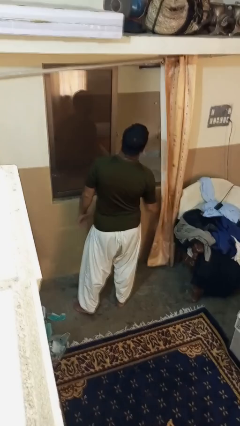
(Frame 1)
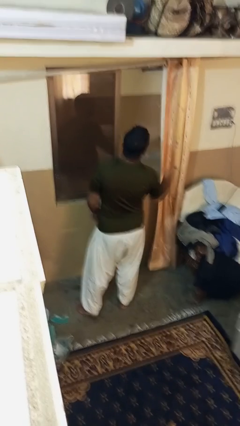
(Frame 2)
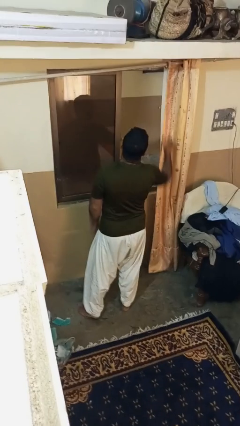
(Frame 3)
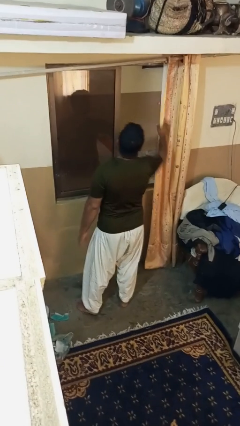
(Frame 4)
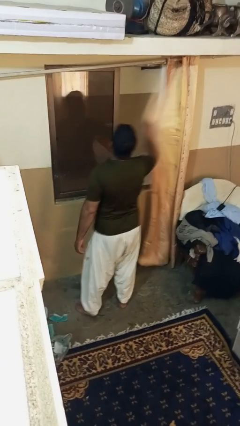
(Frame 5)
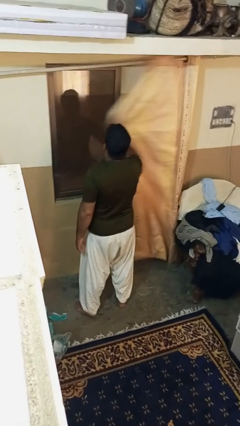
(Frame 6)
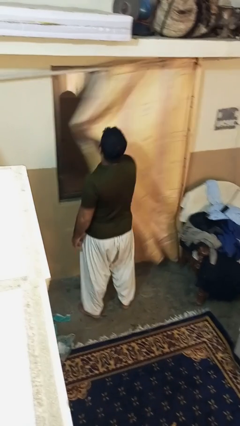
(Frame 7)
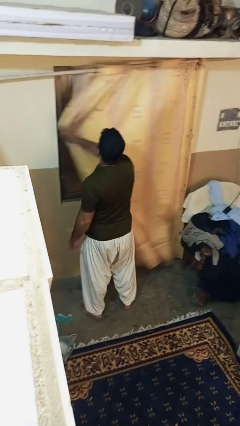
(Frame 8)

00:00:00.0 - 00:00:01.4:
person closes curtains

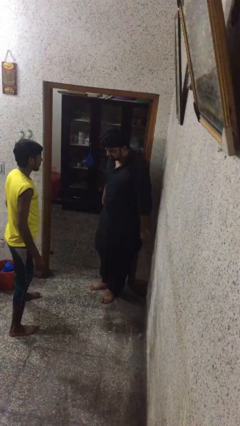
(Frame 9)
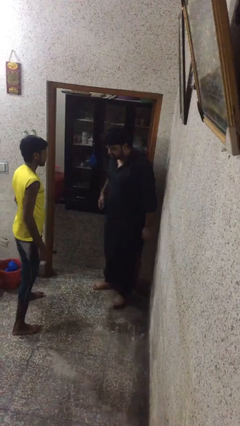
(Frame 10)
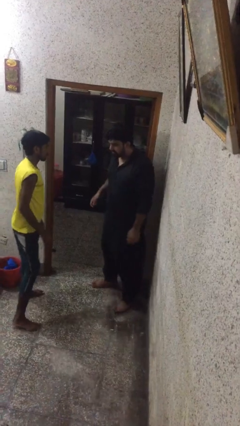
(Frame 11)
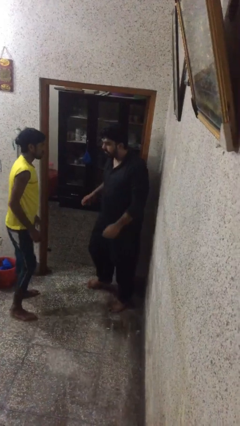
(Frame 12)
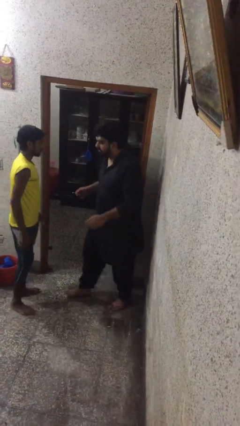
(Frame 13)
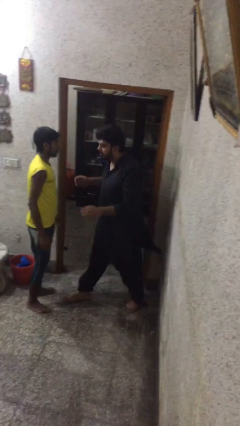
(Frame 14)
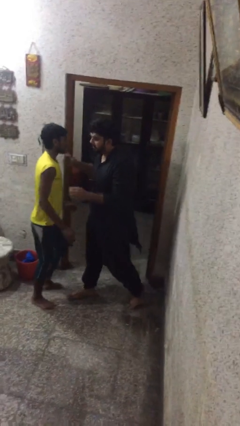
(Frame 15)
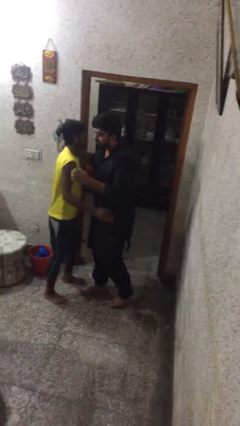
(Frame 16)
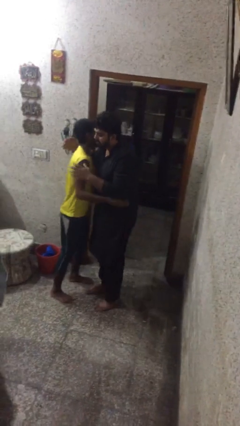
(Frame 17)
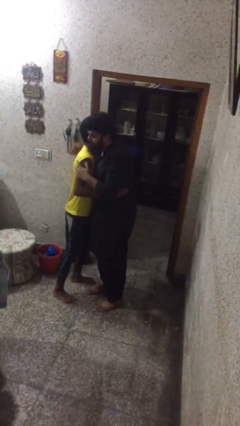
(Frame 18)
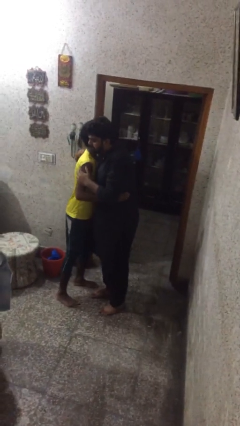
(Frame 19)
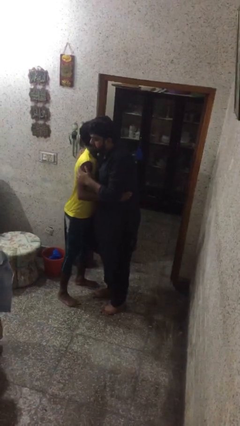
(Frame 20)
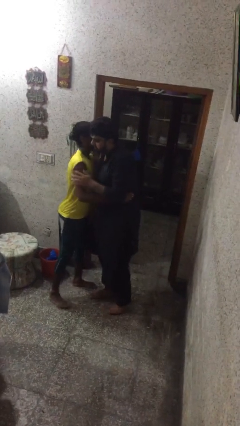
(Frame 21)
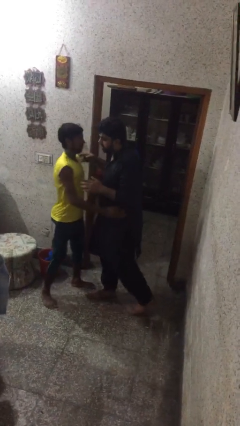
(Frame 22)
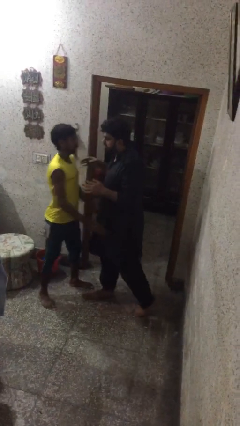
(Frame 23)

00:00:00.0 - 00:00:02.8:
person embraces person

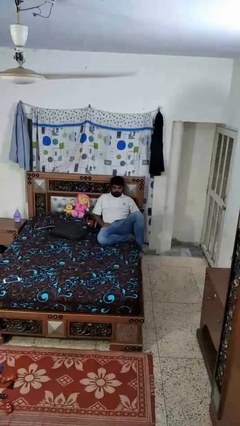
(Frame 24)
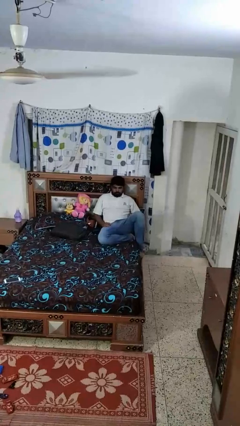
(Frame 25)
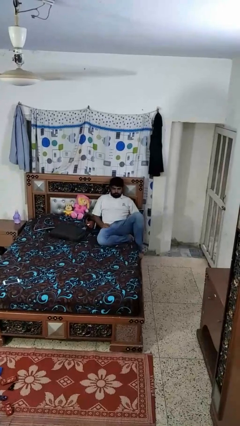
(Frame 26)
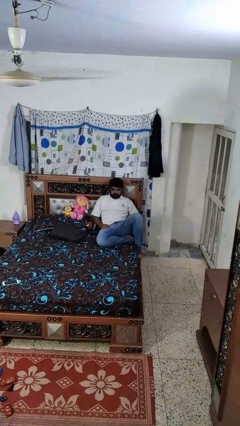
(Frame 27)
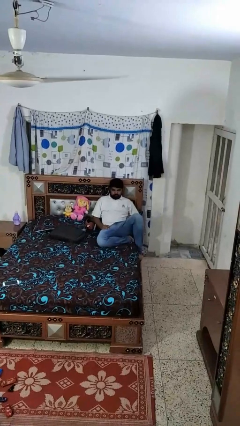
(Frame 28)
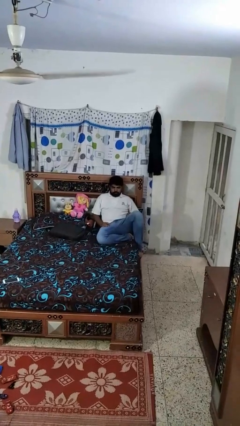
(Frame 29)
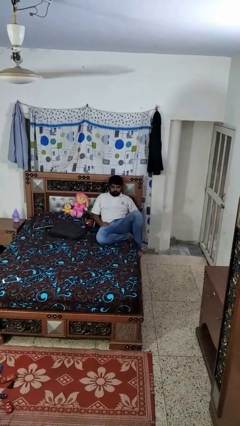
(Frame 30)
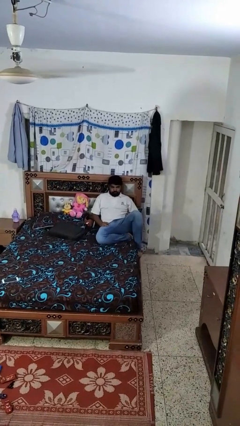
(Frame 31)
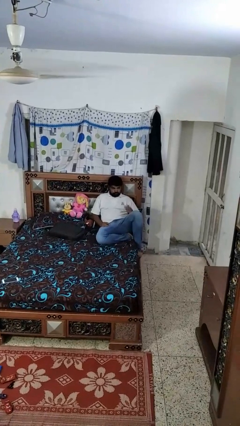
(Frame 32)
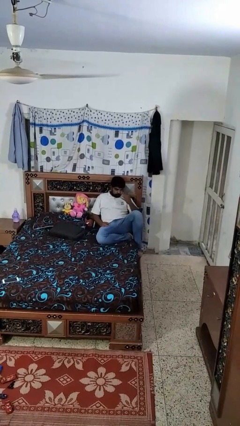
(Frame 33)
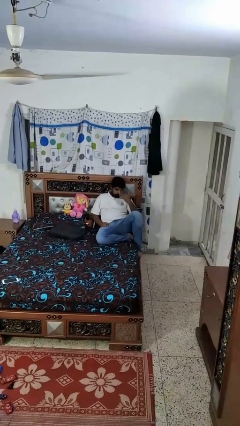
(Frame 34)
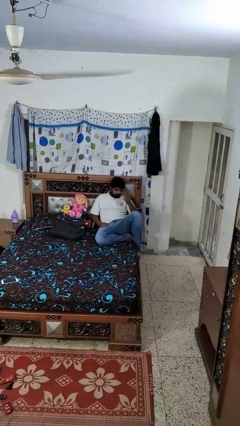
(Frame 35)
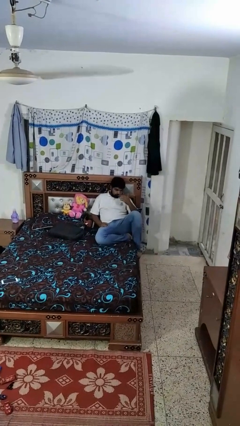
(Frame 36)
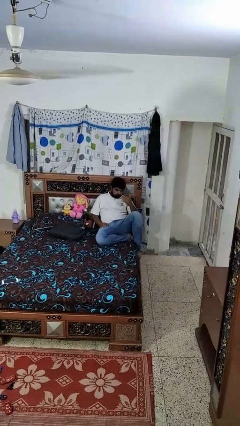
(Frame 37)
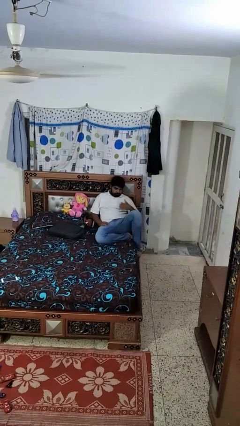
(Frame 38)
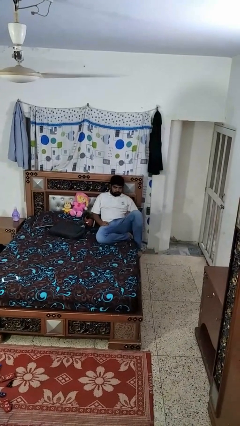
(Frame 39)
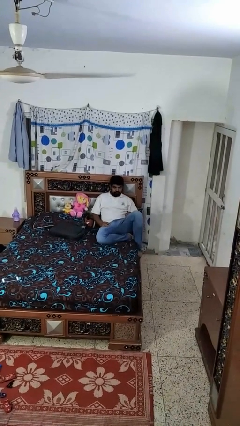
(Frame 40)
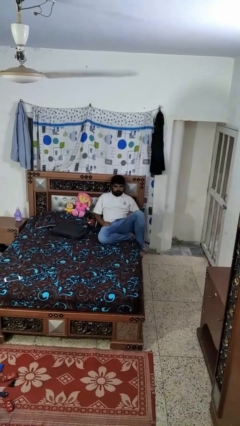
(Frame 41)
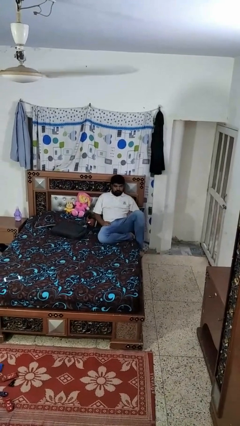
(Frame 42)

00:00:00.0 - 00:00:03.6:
person gestures come here

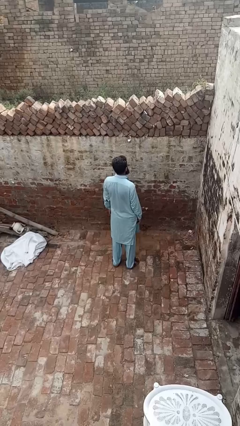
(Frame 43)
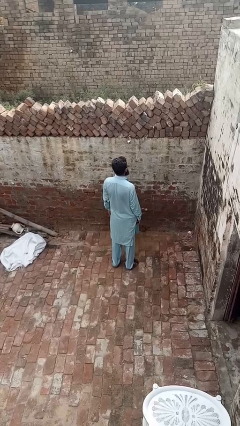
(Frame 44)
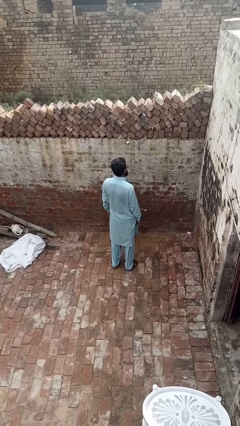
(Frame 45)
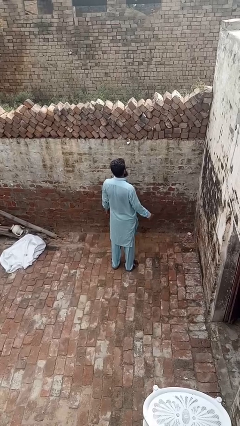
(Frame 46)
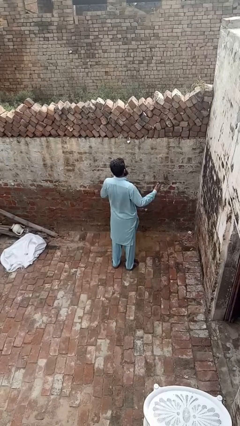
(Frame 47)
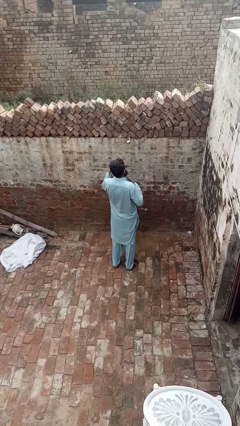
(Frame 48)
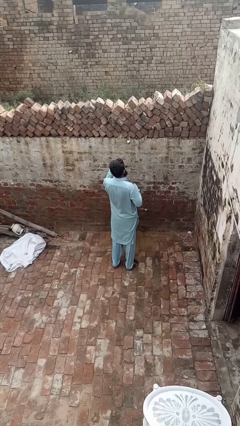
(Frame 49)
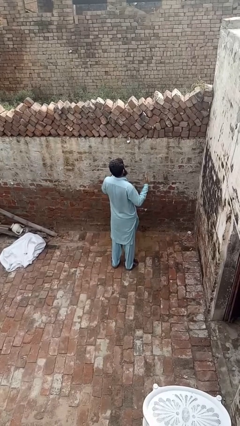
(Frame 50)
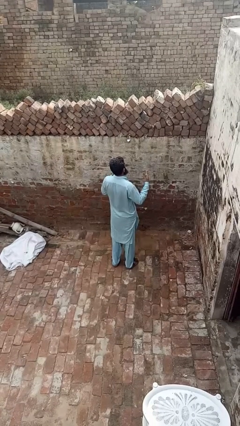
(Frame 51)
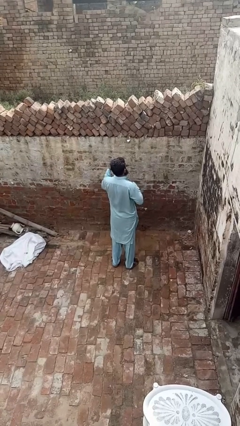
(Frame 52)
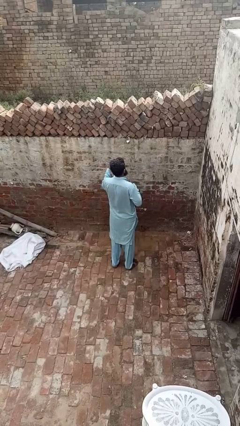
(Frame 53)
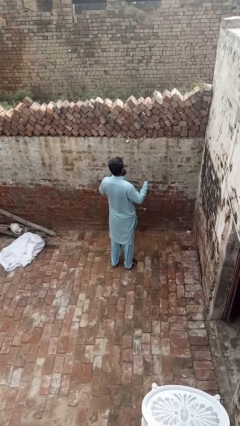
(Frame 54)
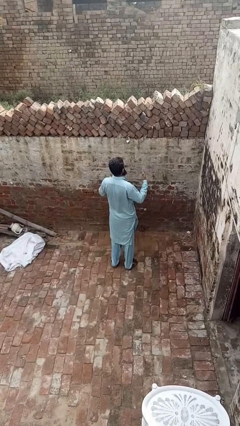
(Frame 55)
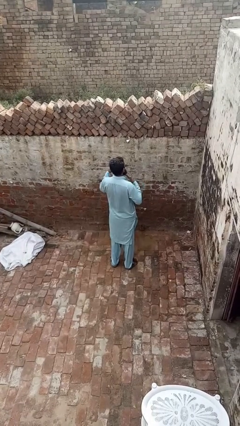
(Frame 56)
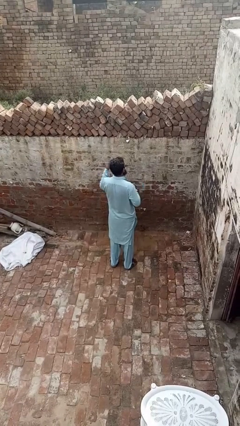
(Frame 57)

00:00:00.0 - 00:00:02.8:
person drums on chest

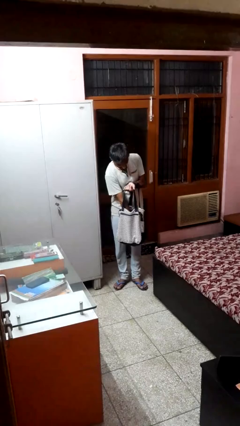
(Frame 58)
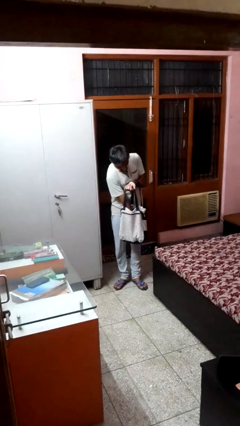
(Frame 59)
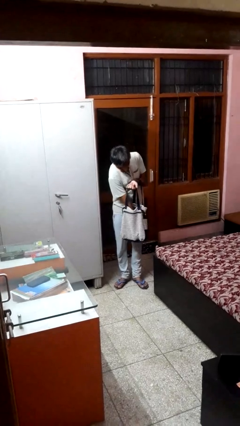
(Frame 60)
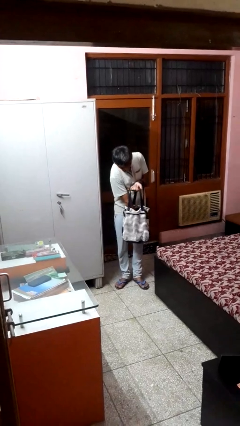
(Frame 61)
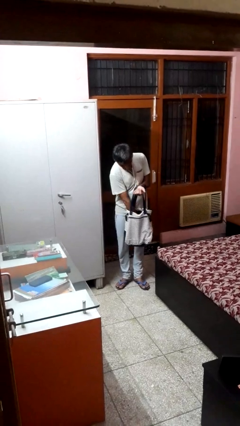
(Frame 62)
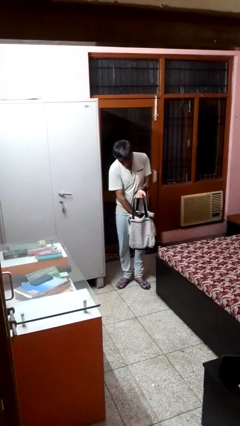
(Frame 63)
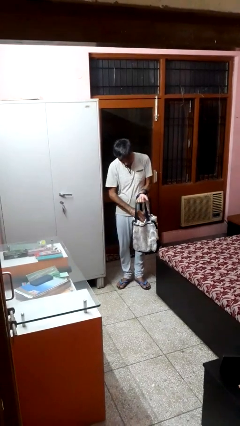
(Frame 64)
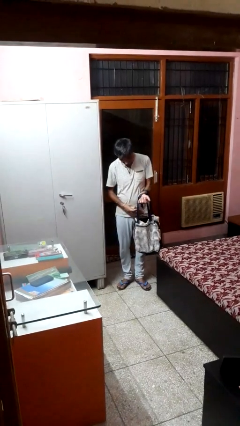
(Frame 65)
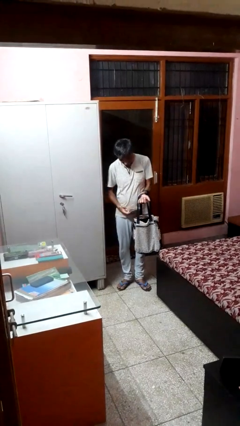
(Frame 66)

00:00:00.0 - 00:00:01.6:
person takes object from bag

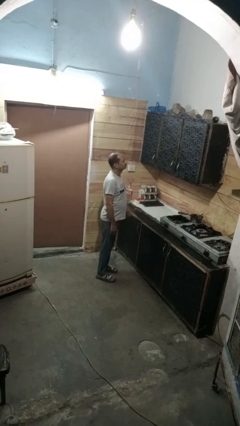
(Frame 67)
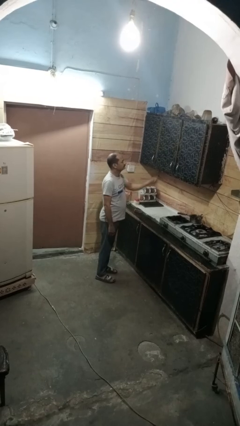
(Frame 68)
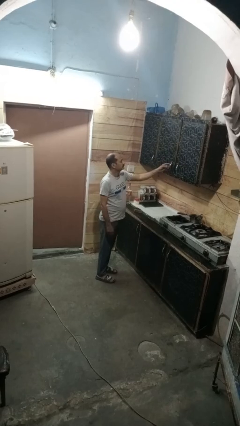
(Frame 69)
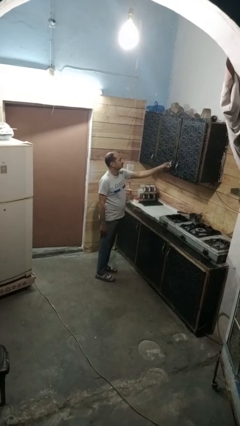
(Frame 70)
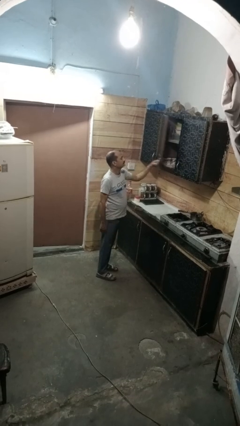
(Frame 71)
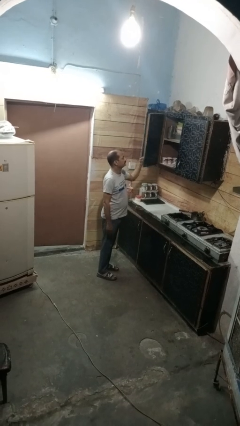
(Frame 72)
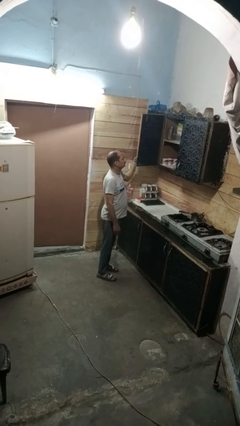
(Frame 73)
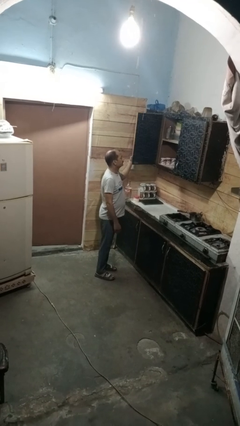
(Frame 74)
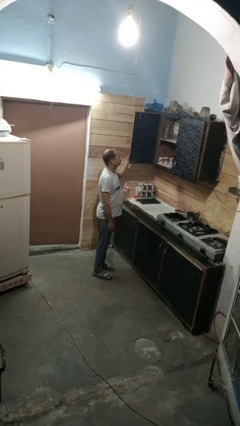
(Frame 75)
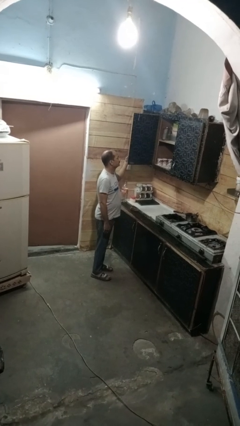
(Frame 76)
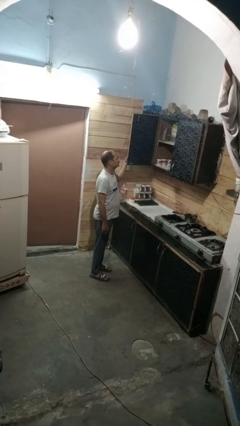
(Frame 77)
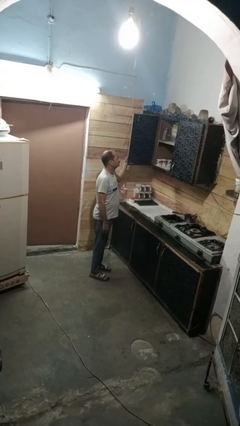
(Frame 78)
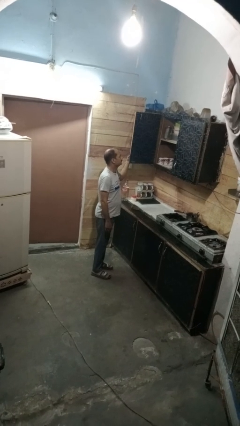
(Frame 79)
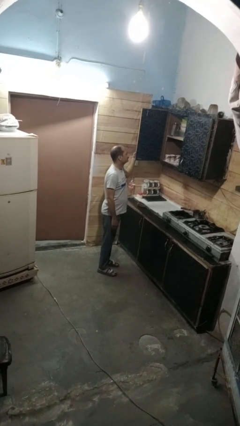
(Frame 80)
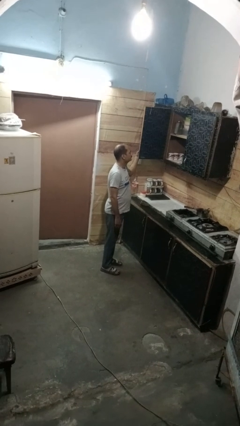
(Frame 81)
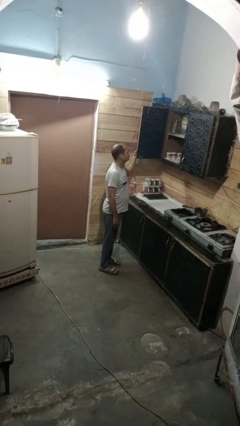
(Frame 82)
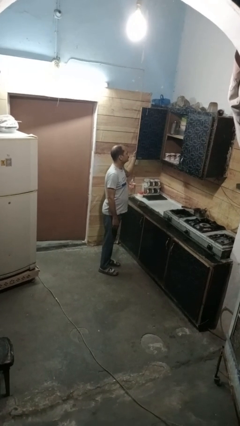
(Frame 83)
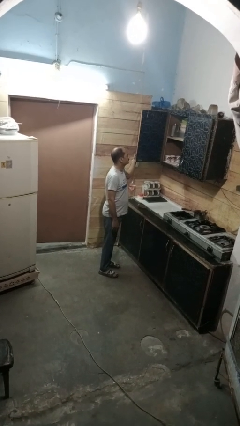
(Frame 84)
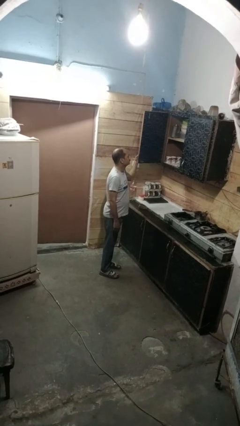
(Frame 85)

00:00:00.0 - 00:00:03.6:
person opens cabinet

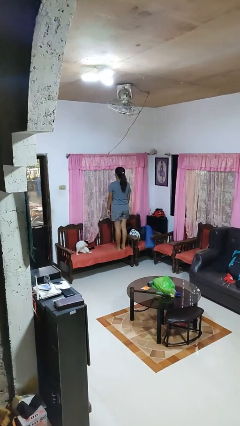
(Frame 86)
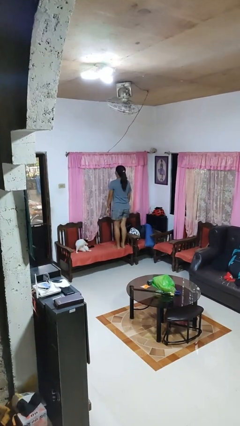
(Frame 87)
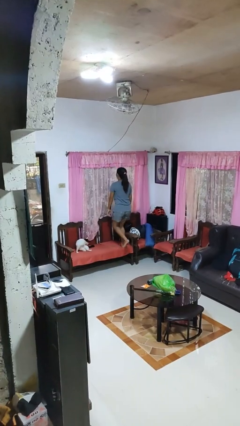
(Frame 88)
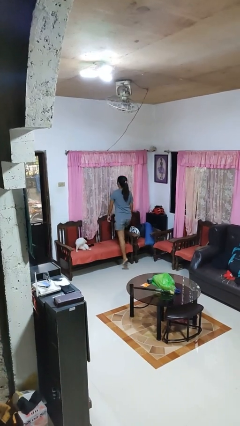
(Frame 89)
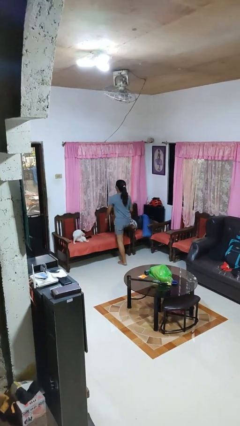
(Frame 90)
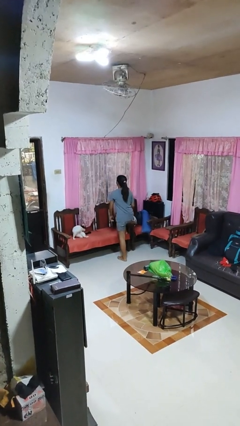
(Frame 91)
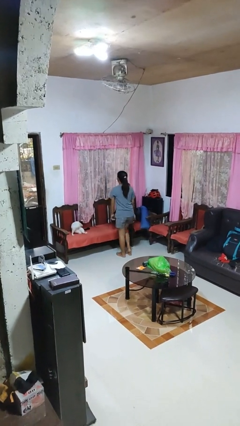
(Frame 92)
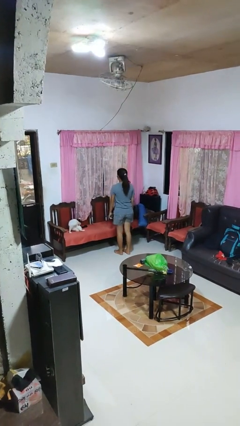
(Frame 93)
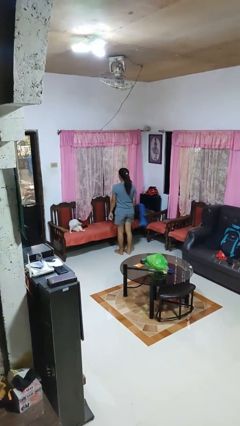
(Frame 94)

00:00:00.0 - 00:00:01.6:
person climbs off chair
